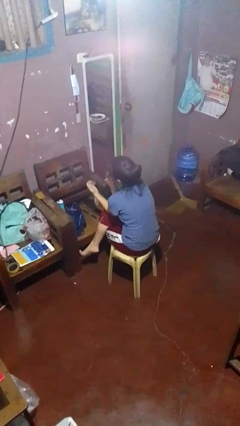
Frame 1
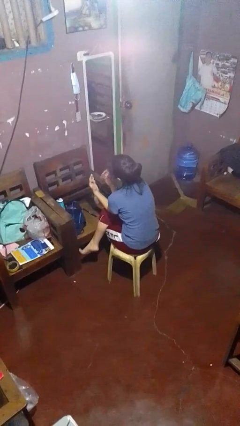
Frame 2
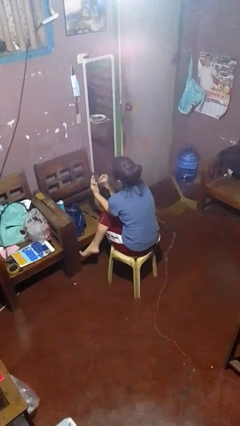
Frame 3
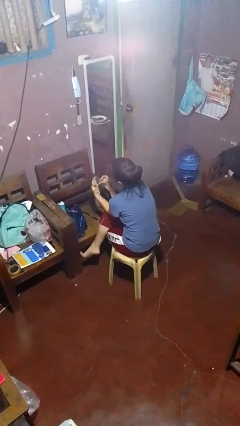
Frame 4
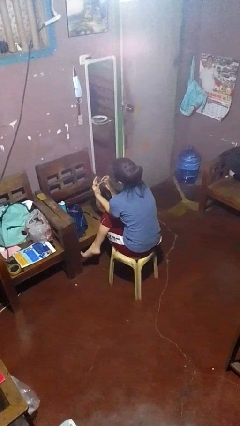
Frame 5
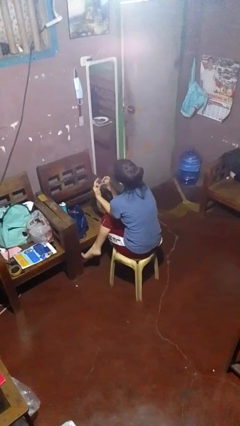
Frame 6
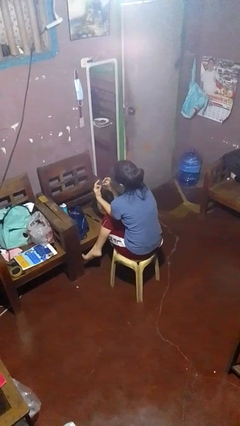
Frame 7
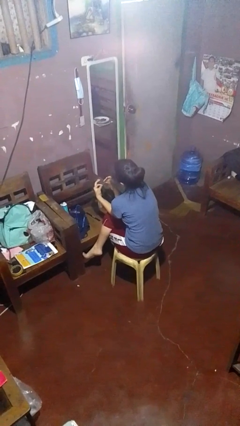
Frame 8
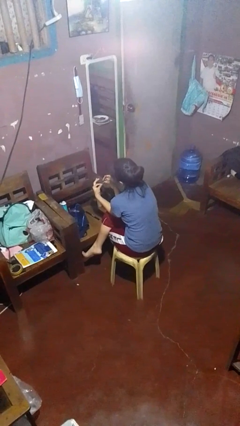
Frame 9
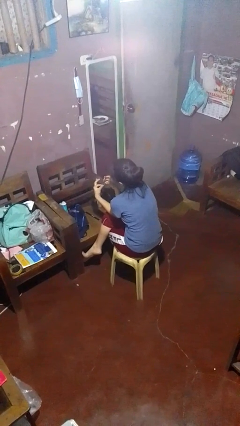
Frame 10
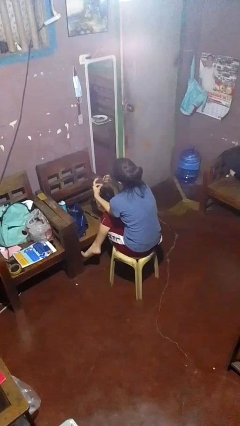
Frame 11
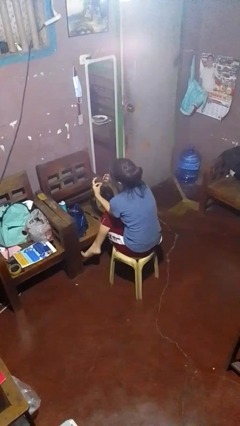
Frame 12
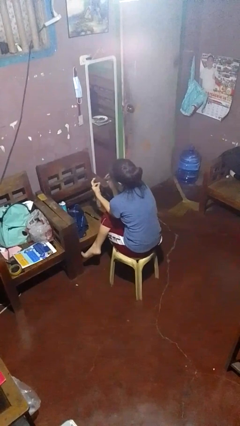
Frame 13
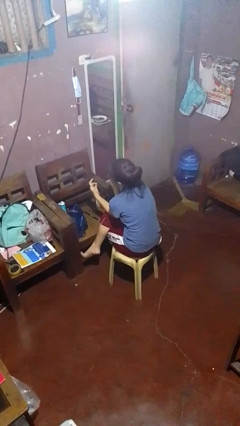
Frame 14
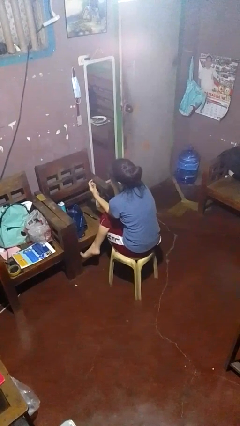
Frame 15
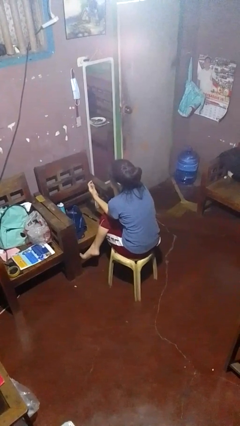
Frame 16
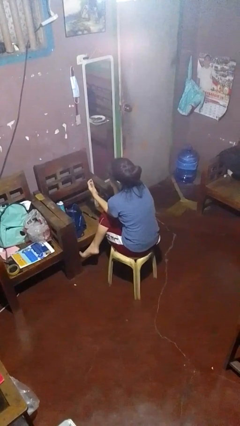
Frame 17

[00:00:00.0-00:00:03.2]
person clips fingernails

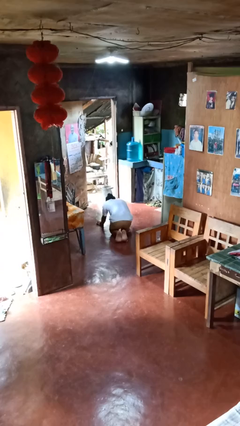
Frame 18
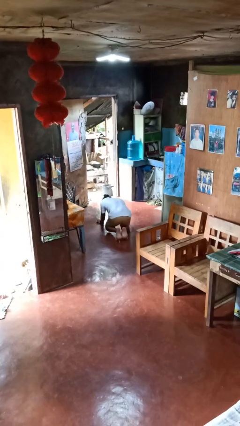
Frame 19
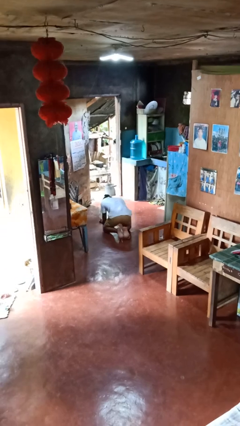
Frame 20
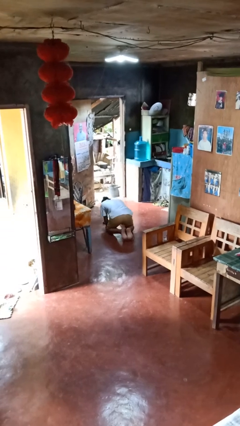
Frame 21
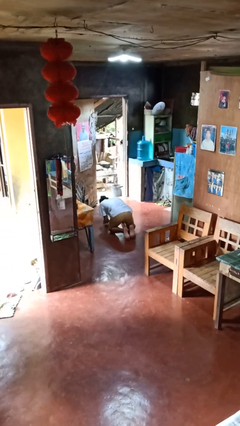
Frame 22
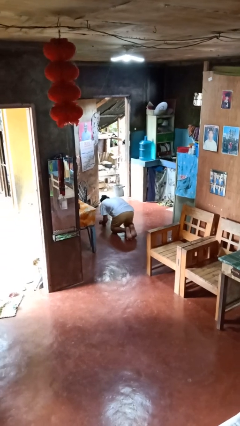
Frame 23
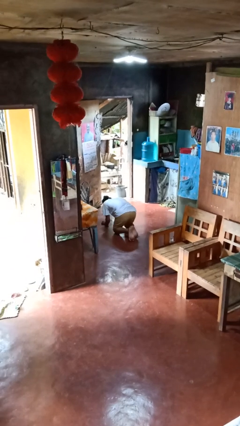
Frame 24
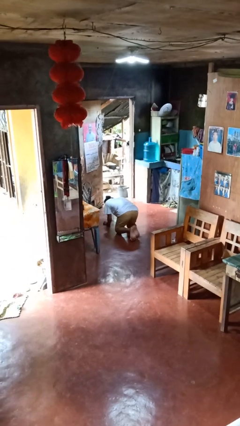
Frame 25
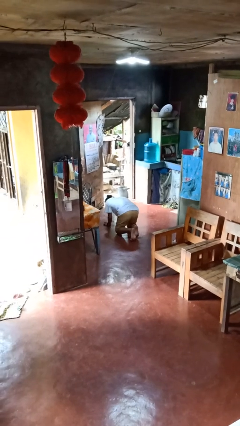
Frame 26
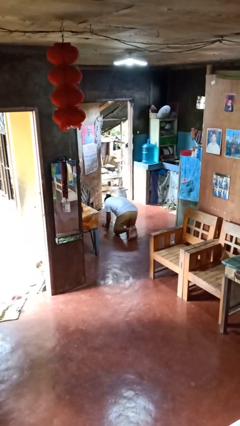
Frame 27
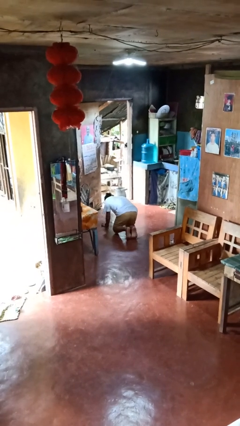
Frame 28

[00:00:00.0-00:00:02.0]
person crawls

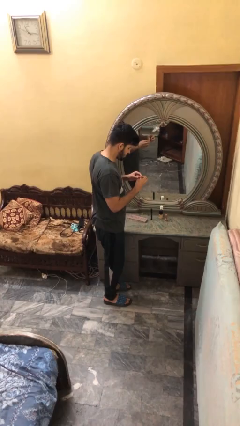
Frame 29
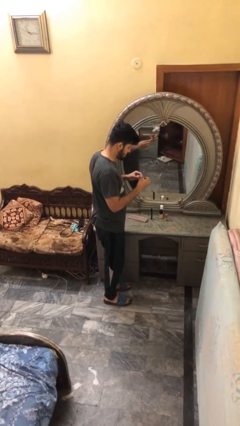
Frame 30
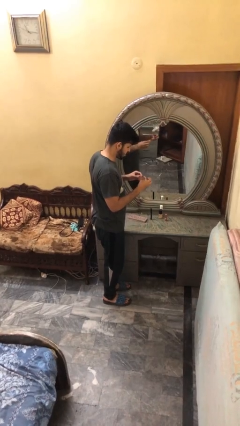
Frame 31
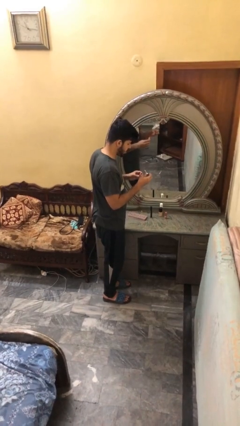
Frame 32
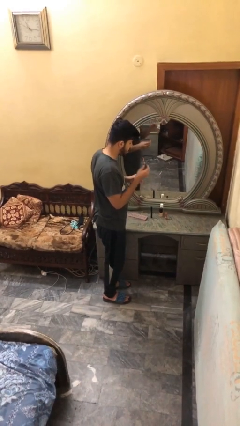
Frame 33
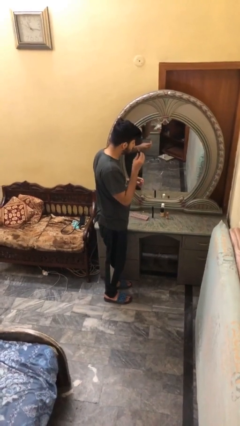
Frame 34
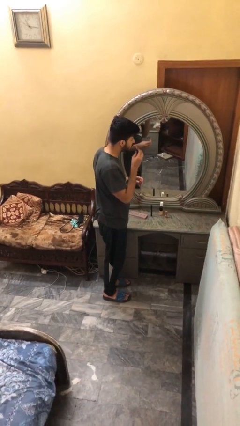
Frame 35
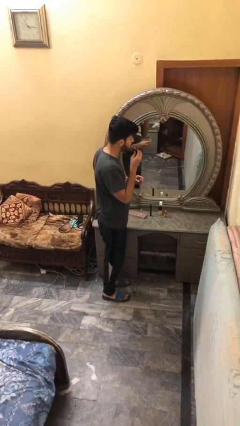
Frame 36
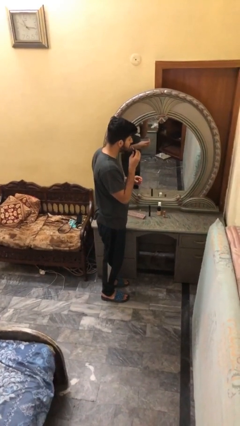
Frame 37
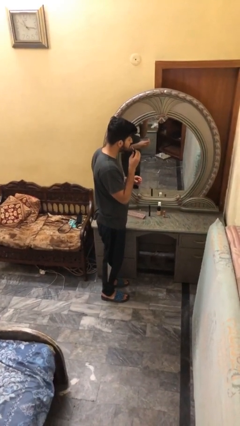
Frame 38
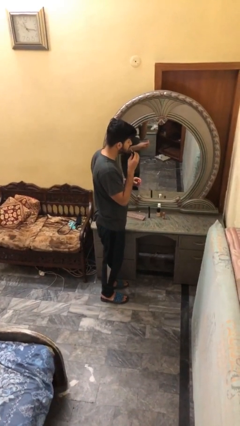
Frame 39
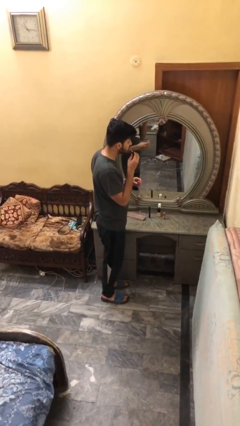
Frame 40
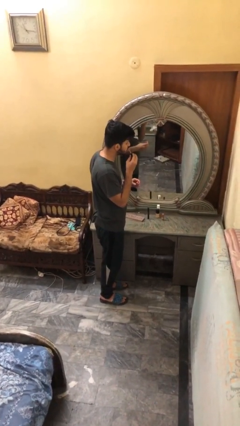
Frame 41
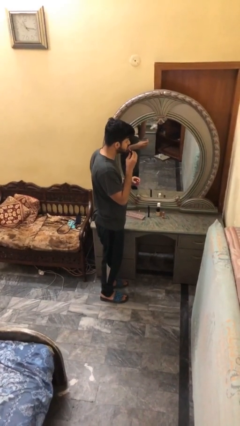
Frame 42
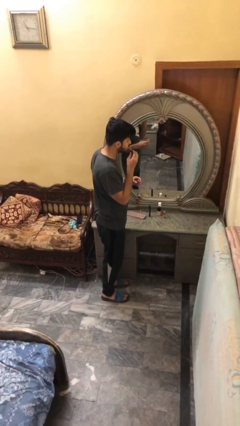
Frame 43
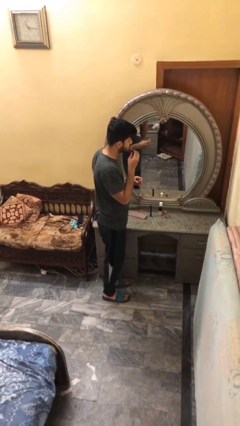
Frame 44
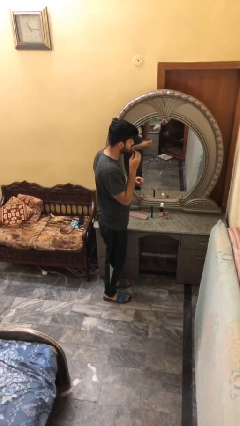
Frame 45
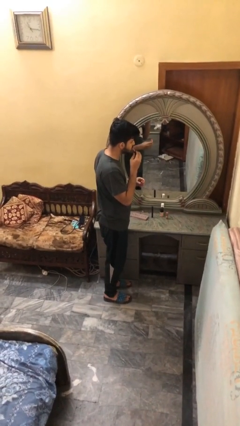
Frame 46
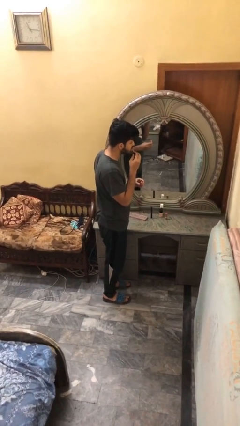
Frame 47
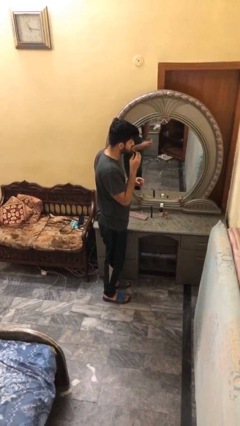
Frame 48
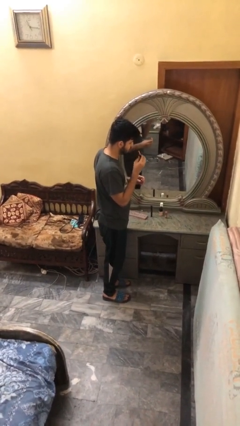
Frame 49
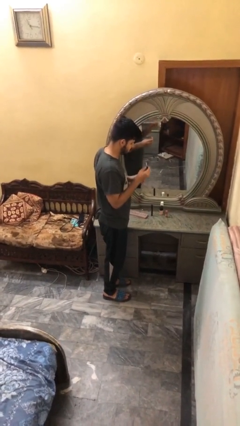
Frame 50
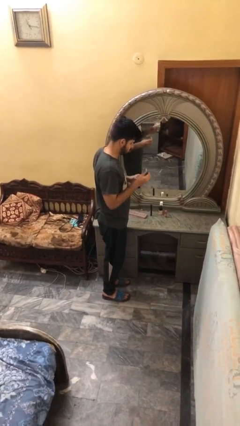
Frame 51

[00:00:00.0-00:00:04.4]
person applies lip makeup

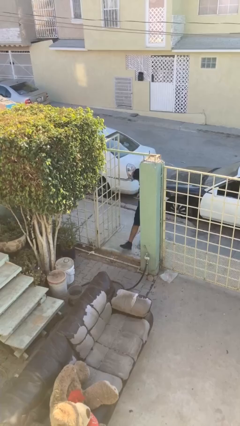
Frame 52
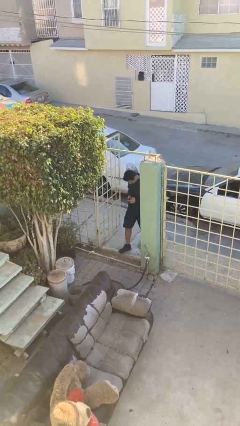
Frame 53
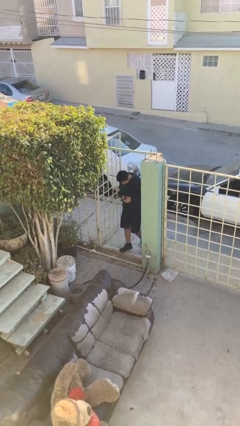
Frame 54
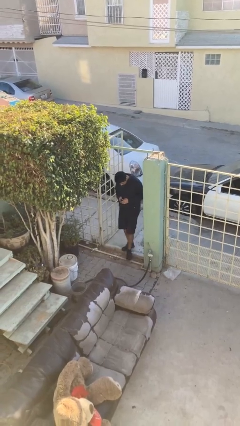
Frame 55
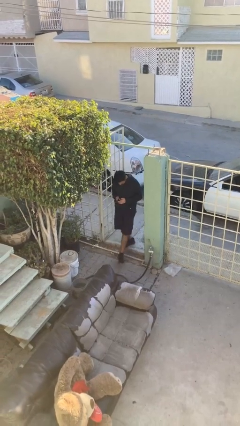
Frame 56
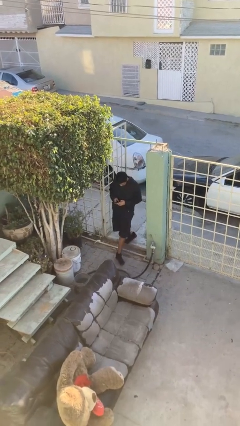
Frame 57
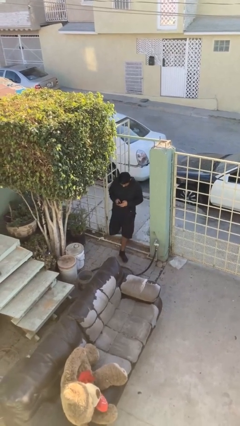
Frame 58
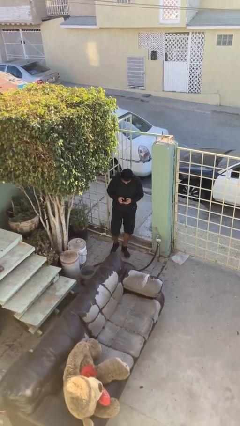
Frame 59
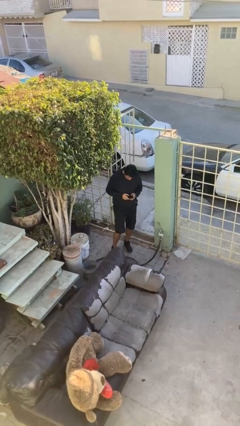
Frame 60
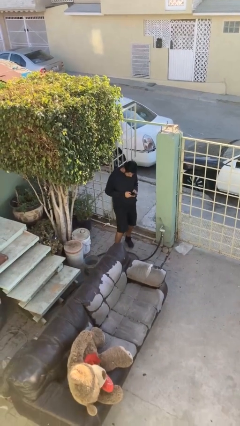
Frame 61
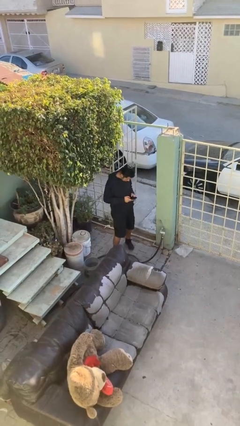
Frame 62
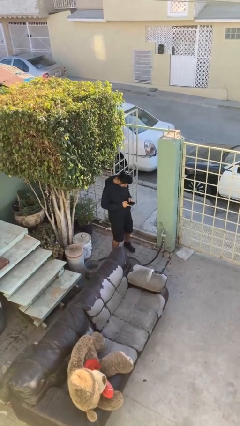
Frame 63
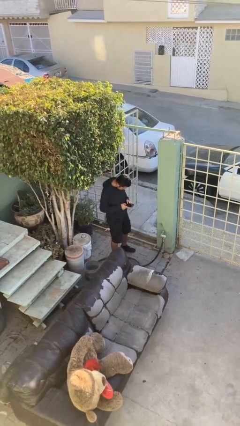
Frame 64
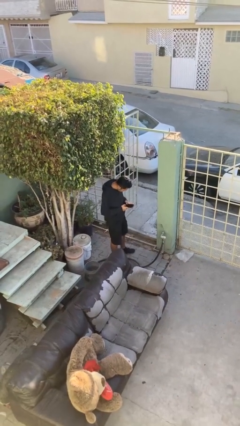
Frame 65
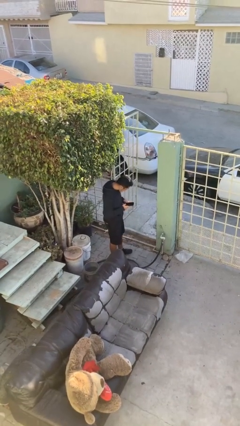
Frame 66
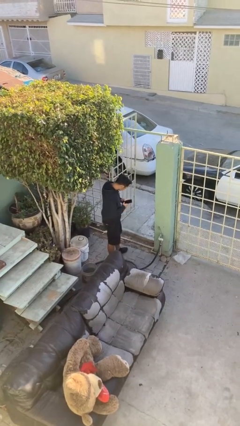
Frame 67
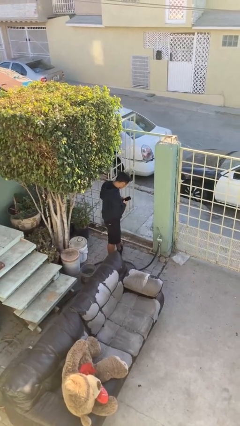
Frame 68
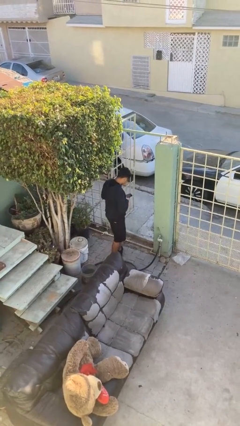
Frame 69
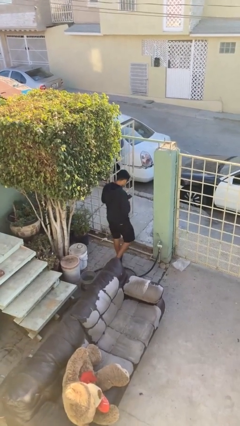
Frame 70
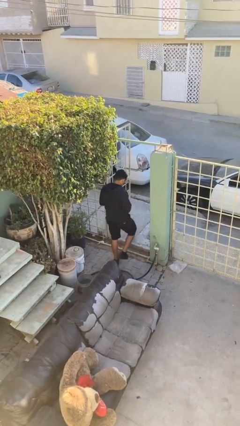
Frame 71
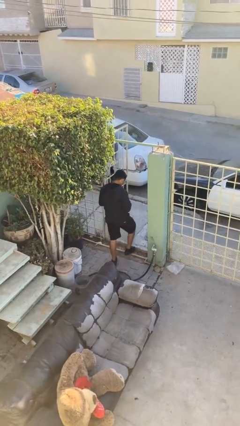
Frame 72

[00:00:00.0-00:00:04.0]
person enters scene through structure

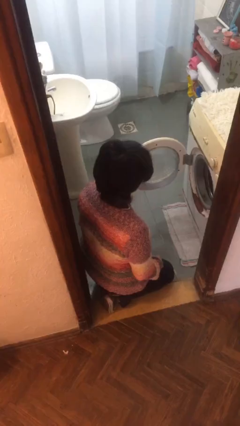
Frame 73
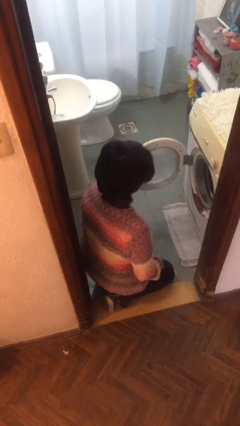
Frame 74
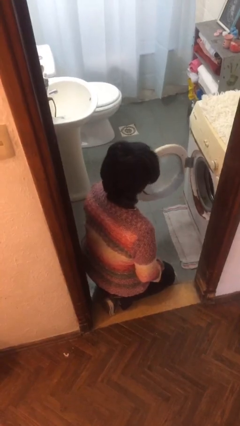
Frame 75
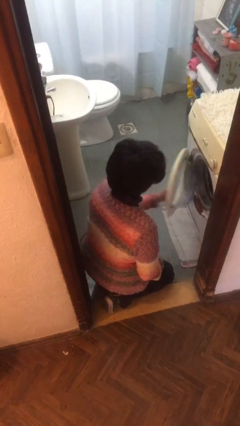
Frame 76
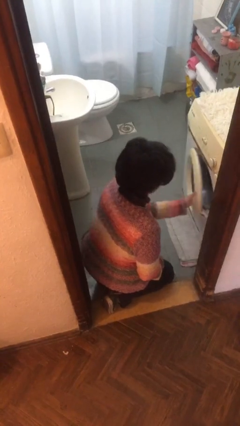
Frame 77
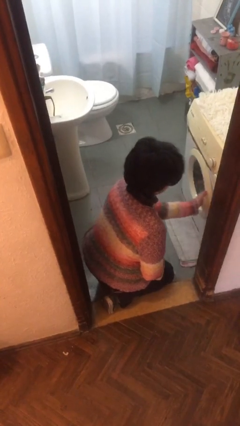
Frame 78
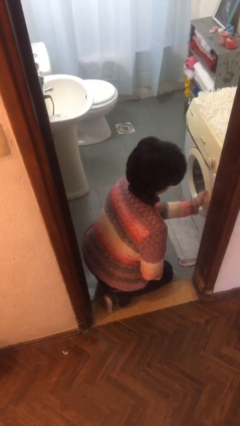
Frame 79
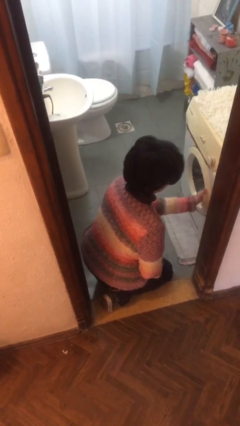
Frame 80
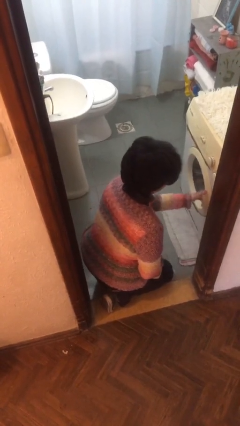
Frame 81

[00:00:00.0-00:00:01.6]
person closes clothes washer

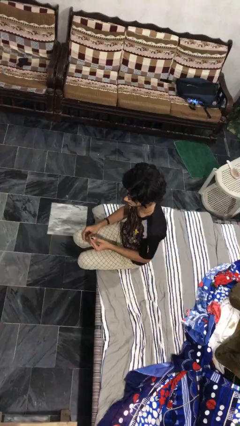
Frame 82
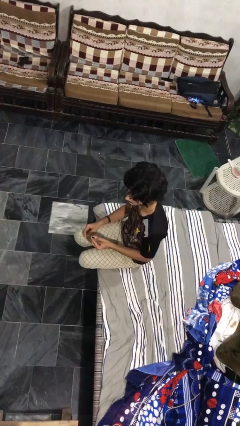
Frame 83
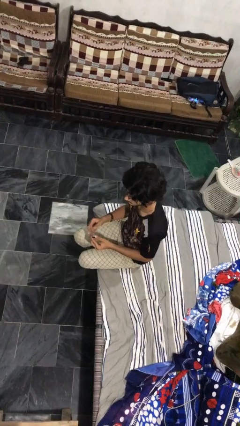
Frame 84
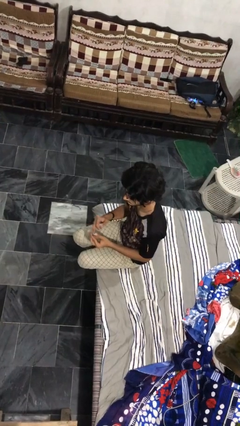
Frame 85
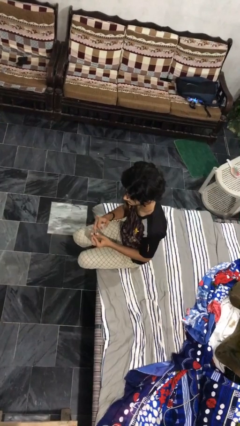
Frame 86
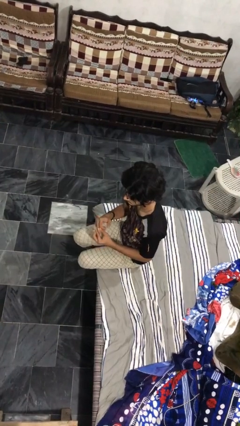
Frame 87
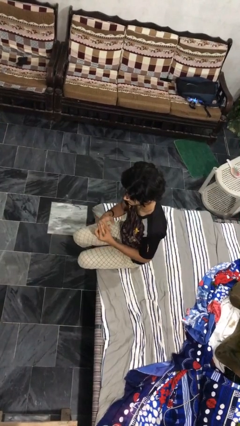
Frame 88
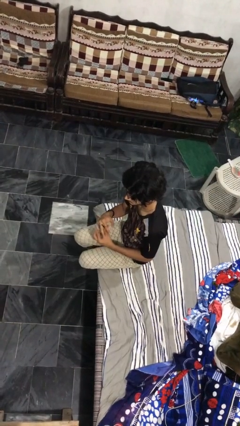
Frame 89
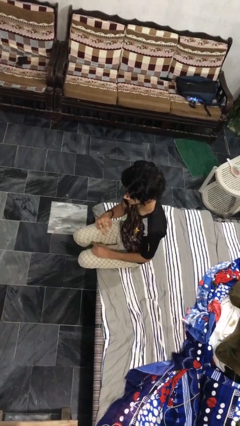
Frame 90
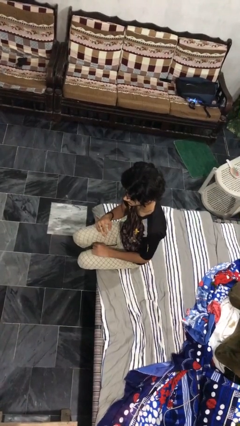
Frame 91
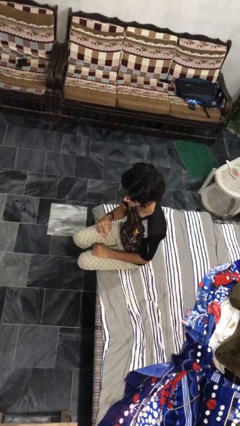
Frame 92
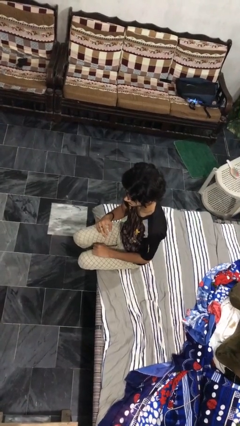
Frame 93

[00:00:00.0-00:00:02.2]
person puts on ring
